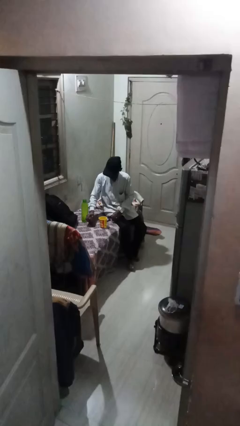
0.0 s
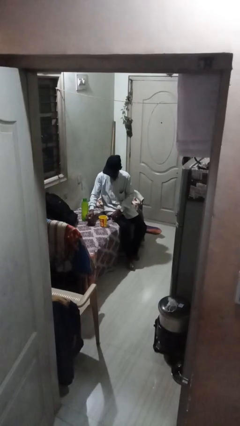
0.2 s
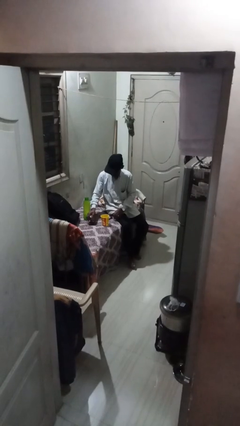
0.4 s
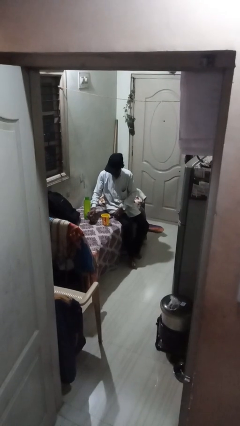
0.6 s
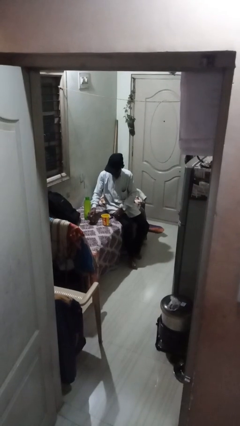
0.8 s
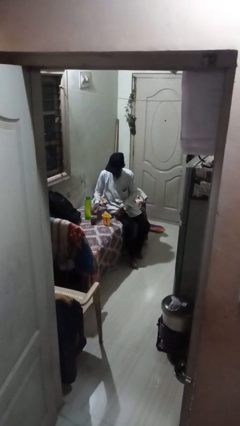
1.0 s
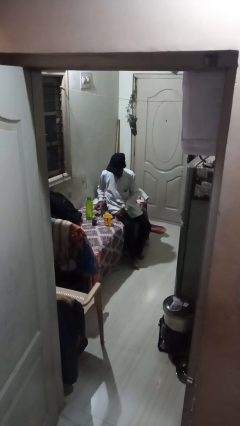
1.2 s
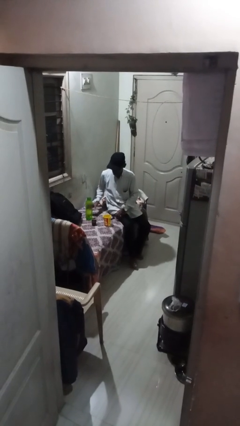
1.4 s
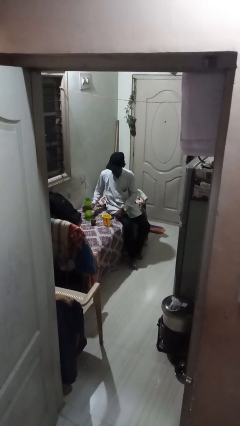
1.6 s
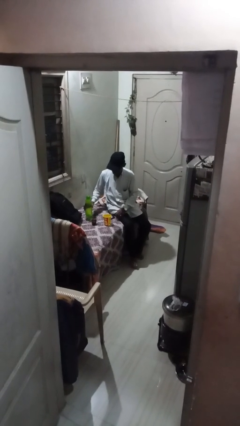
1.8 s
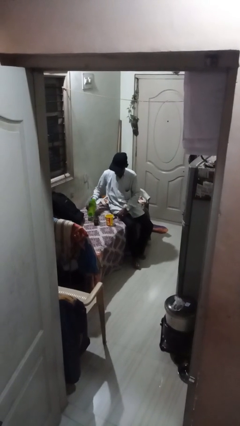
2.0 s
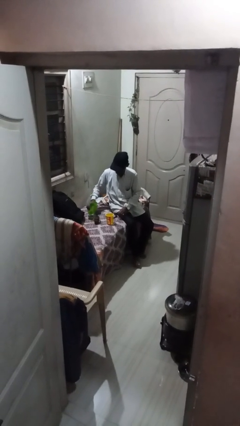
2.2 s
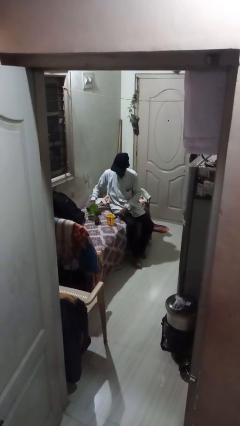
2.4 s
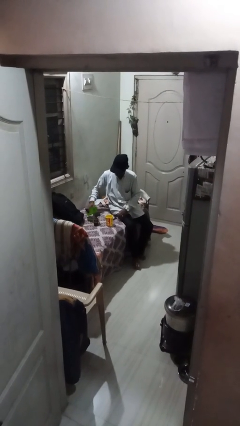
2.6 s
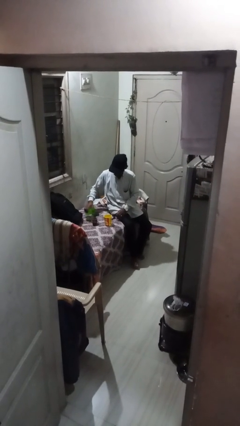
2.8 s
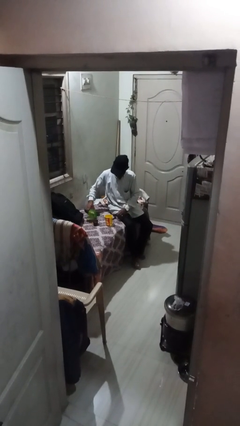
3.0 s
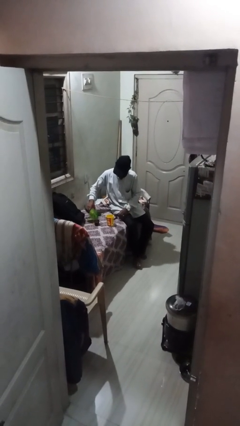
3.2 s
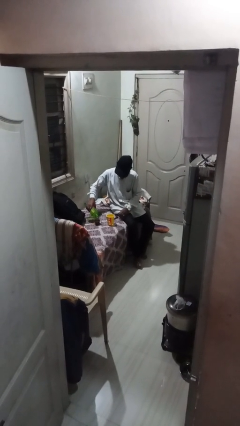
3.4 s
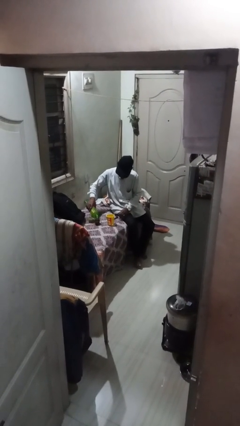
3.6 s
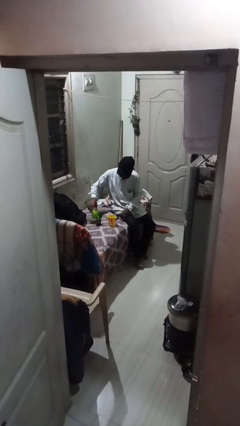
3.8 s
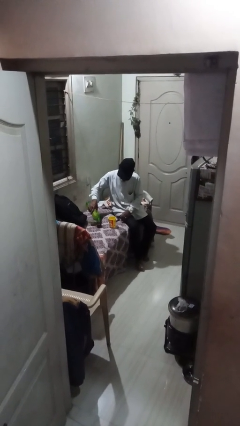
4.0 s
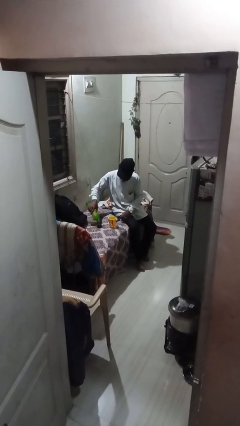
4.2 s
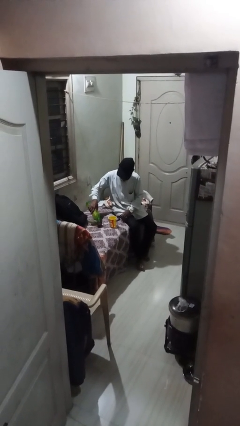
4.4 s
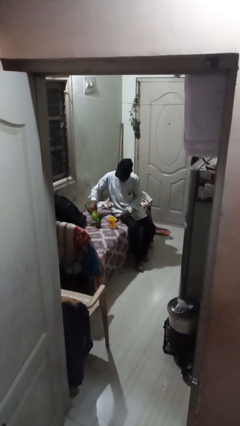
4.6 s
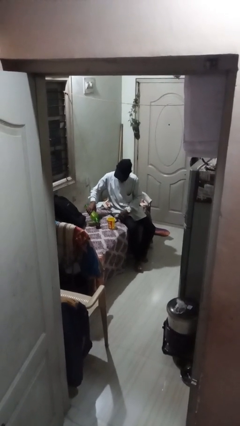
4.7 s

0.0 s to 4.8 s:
person pours liquid into cup

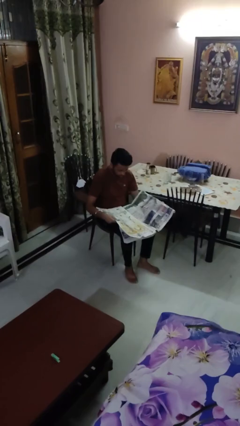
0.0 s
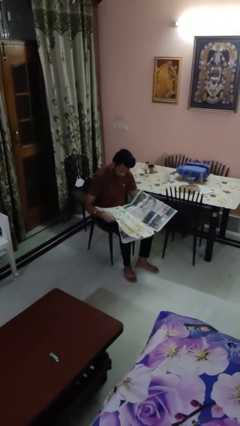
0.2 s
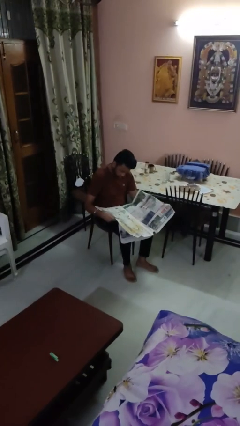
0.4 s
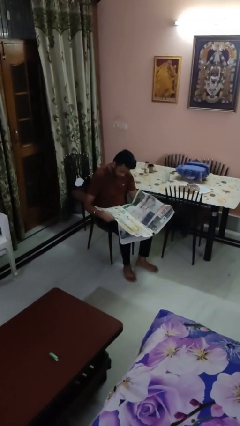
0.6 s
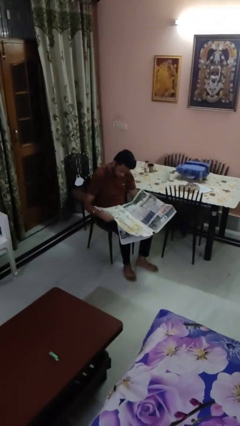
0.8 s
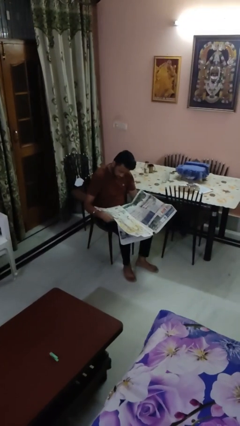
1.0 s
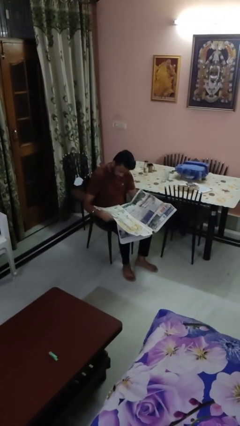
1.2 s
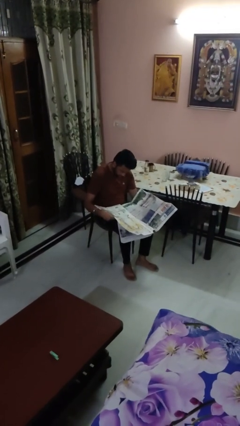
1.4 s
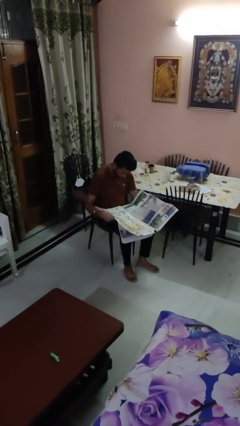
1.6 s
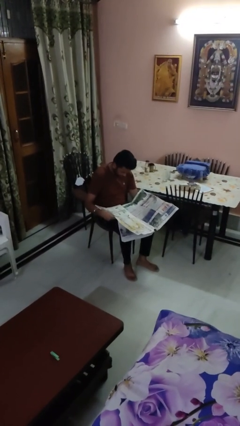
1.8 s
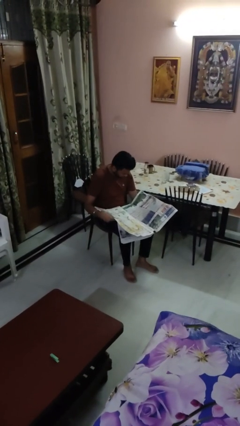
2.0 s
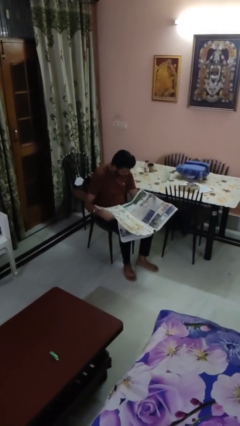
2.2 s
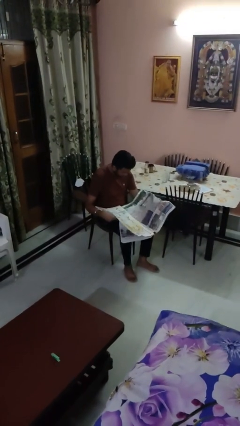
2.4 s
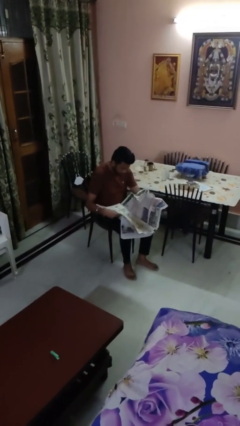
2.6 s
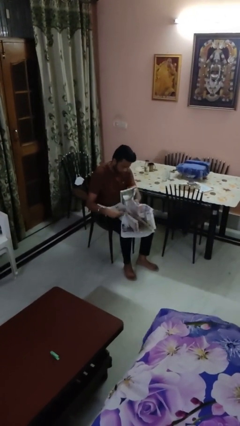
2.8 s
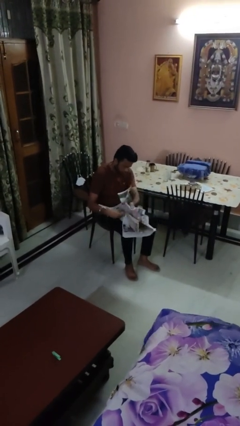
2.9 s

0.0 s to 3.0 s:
person reads newspaper

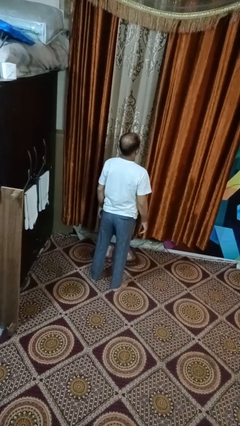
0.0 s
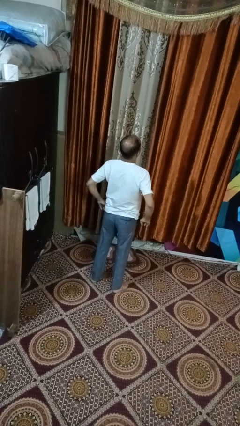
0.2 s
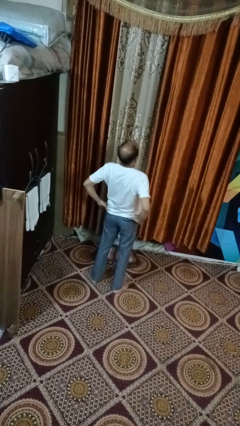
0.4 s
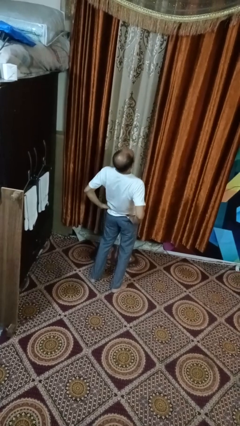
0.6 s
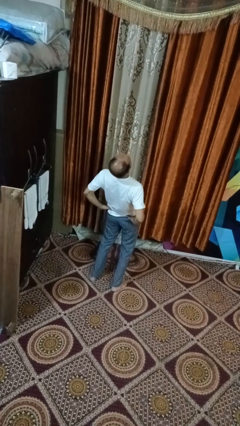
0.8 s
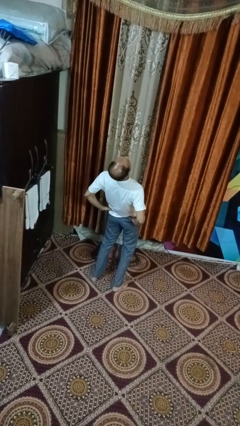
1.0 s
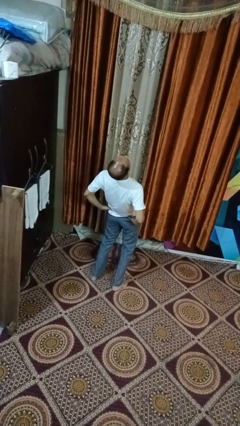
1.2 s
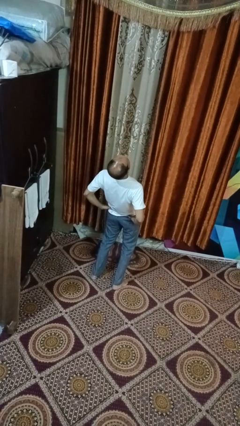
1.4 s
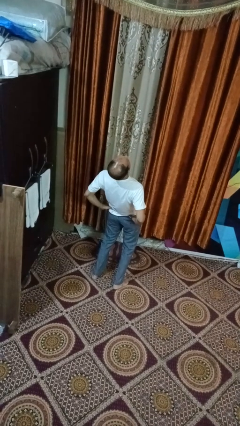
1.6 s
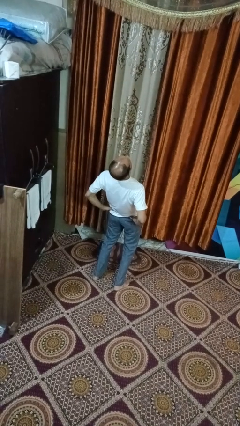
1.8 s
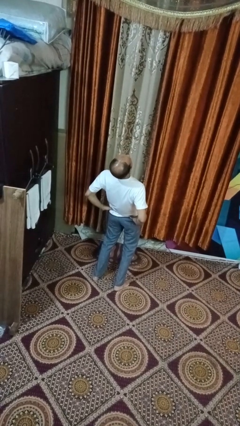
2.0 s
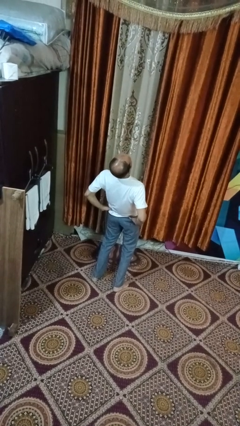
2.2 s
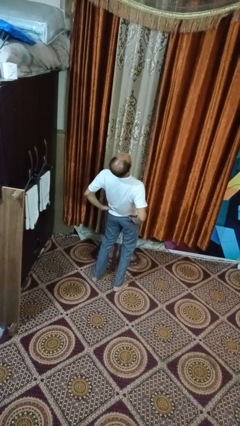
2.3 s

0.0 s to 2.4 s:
person stretches back

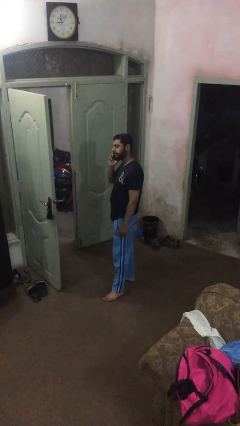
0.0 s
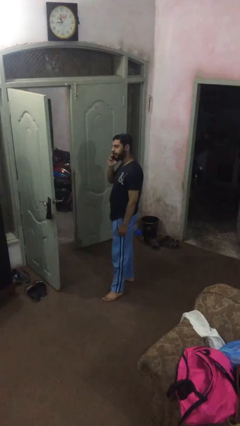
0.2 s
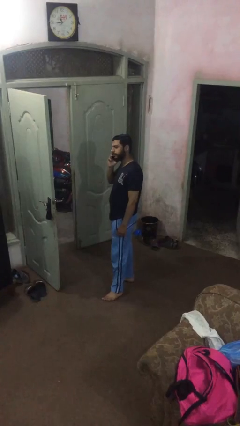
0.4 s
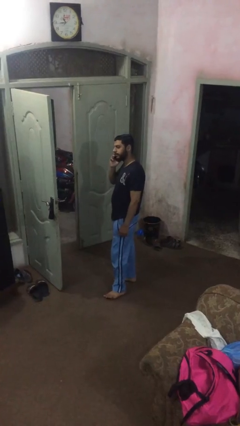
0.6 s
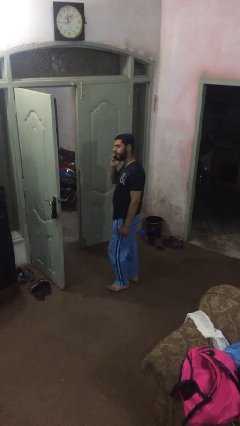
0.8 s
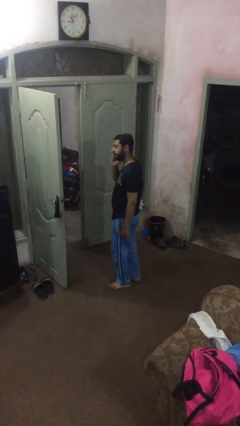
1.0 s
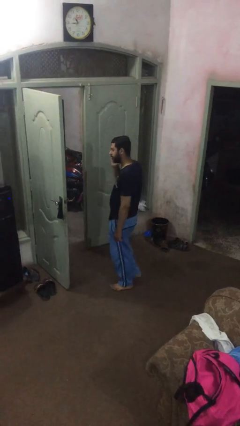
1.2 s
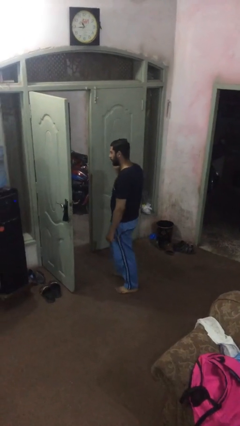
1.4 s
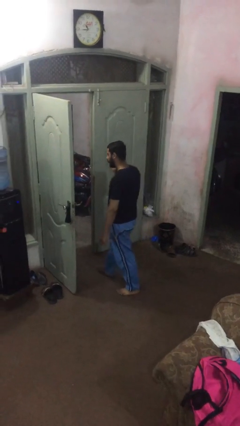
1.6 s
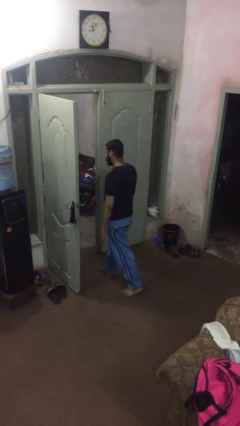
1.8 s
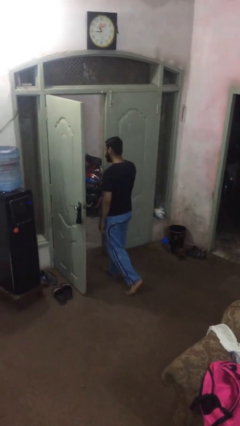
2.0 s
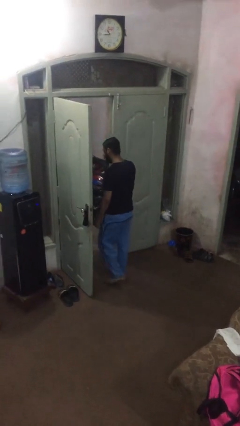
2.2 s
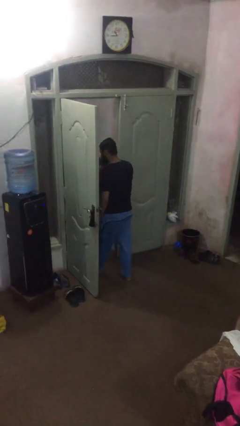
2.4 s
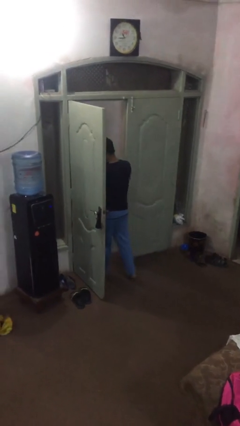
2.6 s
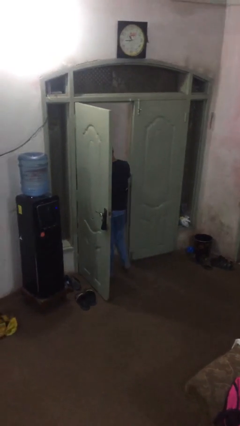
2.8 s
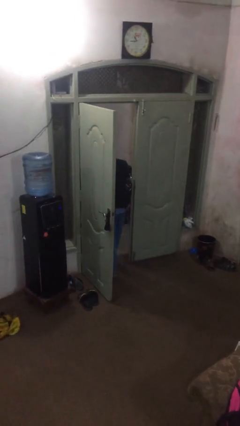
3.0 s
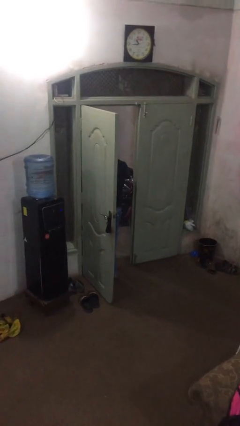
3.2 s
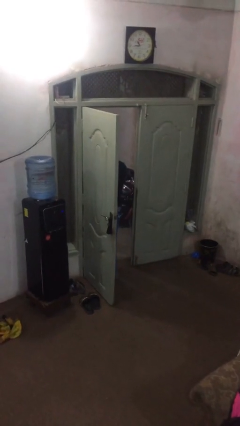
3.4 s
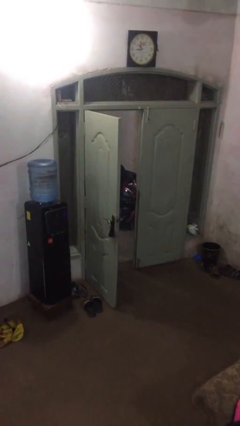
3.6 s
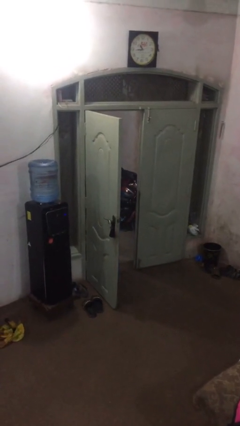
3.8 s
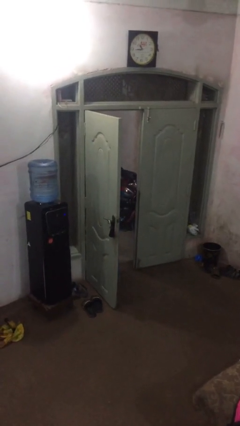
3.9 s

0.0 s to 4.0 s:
person exits scene through structure

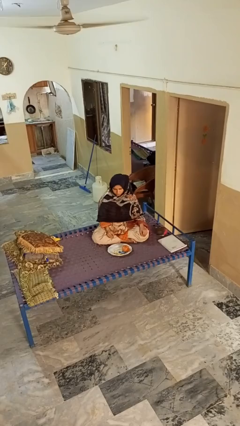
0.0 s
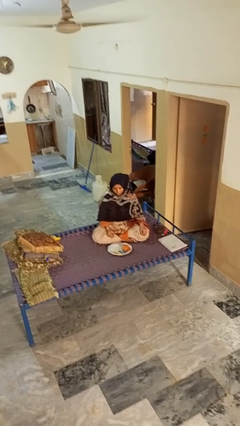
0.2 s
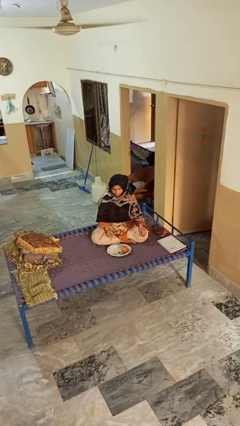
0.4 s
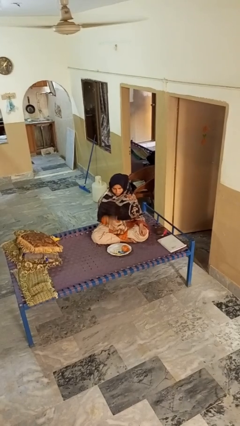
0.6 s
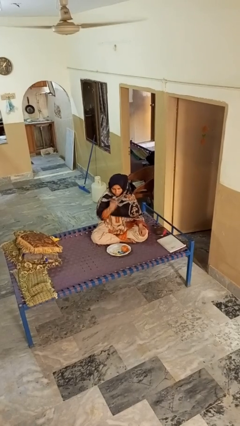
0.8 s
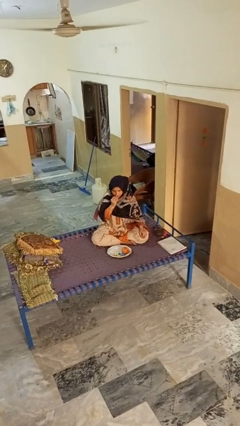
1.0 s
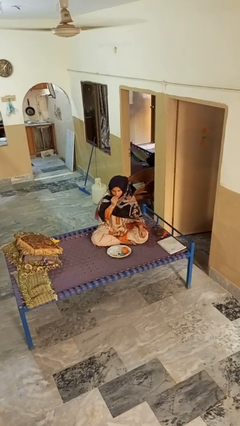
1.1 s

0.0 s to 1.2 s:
person eats apple

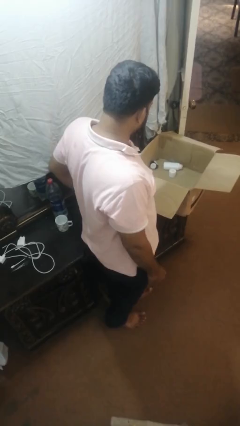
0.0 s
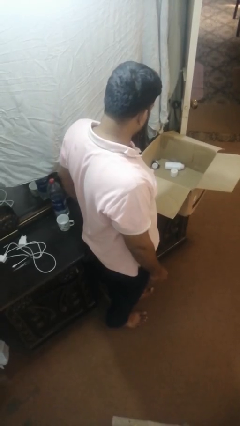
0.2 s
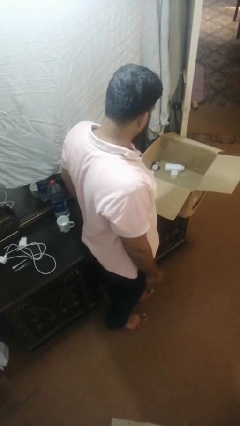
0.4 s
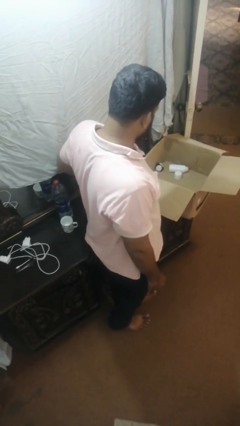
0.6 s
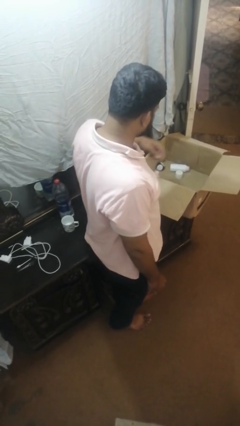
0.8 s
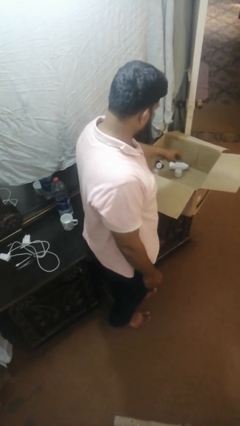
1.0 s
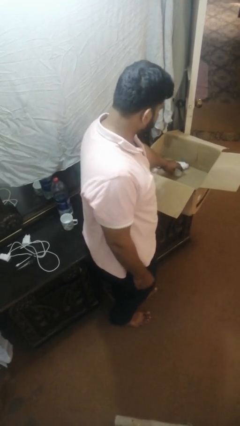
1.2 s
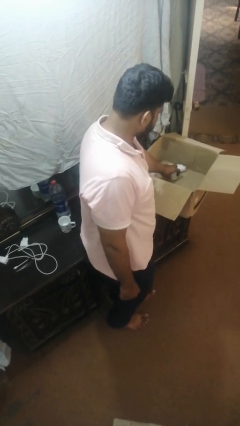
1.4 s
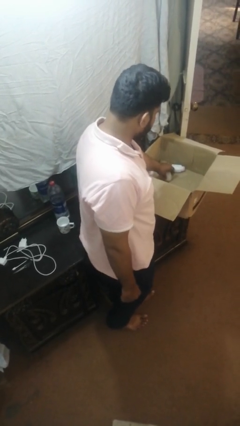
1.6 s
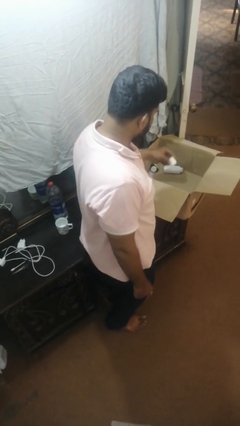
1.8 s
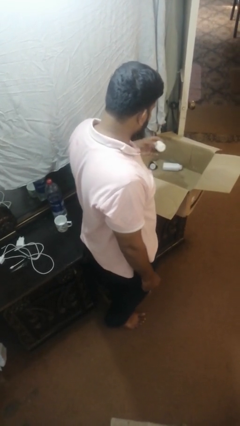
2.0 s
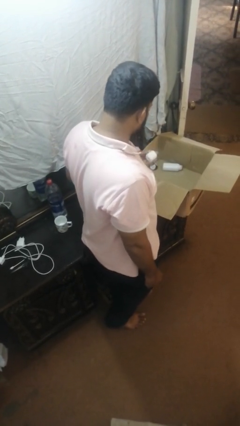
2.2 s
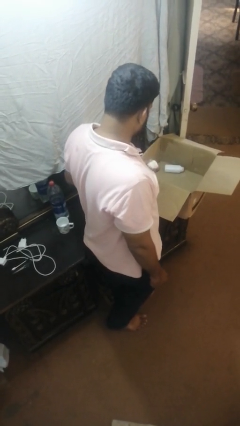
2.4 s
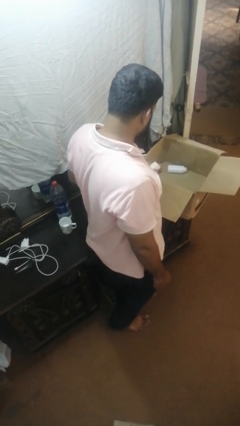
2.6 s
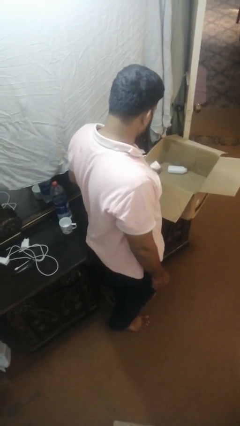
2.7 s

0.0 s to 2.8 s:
person takes object from box
